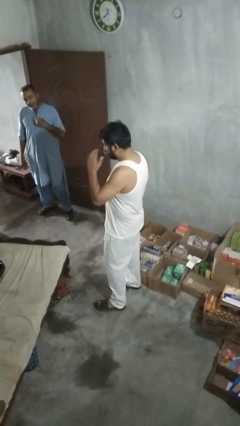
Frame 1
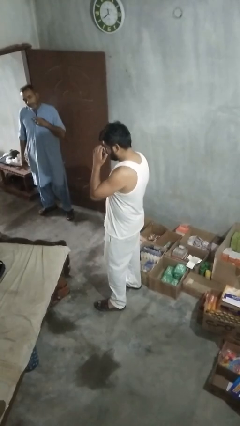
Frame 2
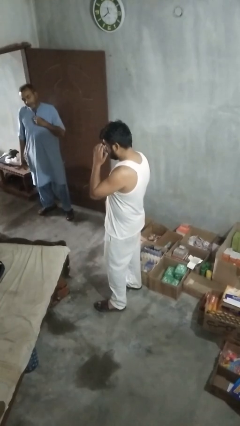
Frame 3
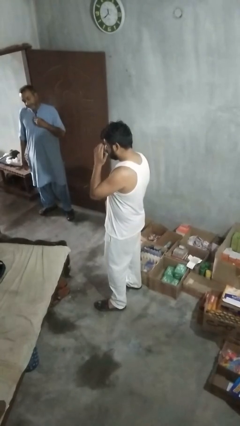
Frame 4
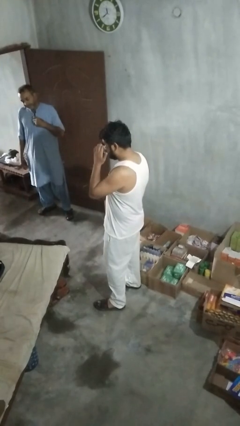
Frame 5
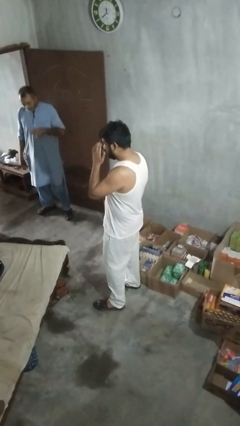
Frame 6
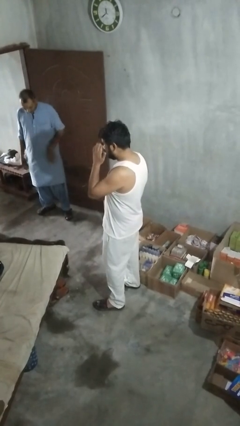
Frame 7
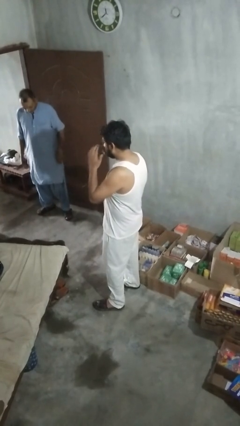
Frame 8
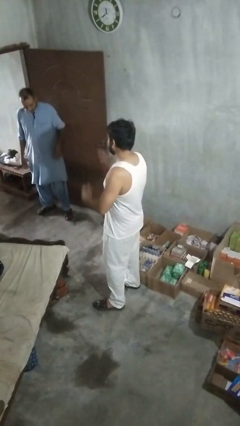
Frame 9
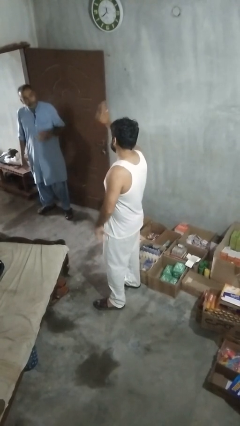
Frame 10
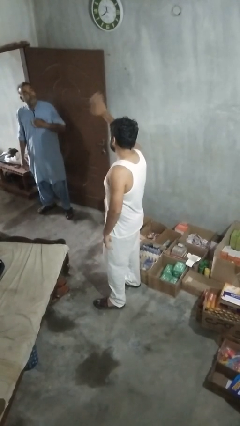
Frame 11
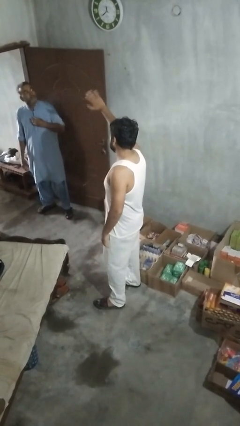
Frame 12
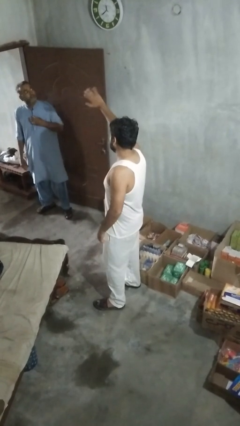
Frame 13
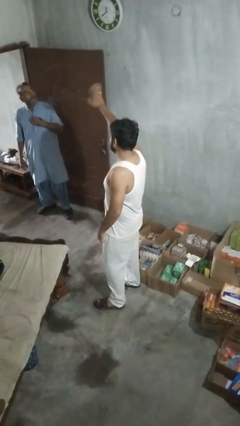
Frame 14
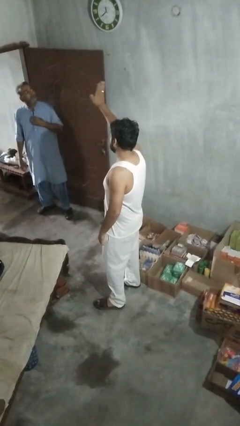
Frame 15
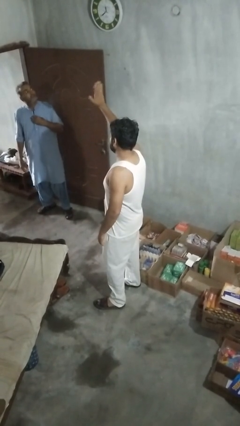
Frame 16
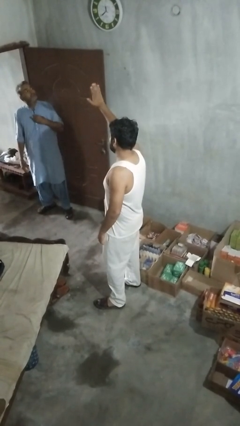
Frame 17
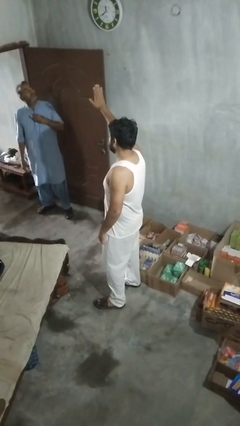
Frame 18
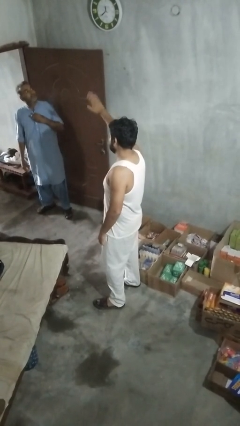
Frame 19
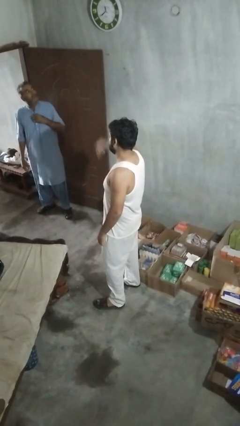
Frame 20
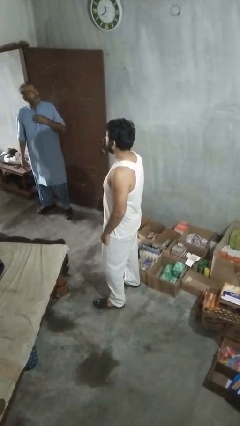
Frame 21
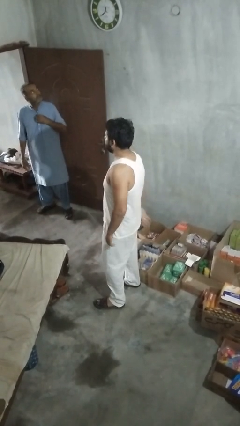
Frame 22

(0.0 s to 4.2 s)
person waves at person

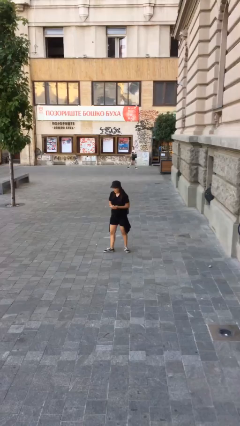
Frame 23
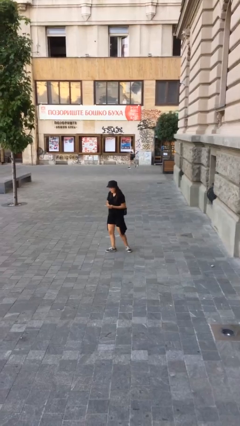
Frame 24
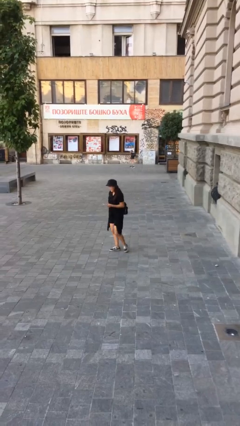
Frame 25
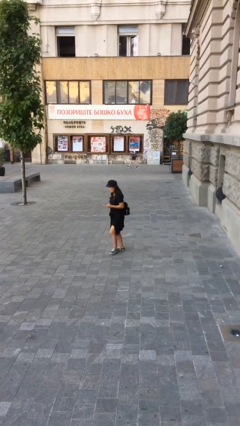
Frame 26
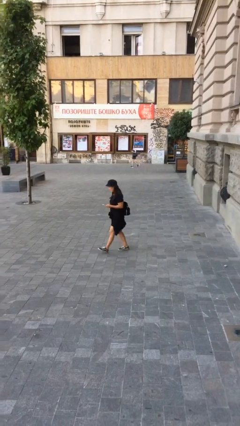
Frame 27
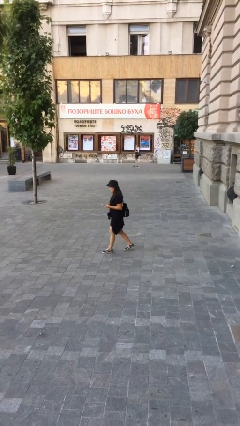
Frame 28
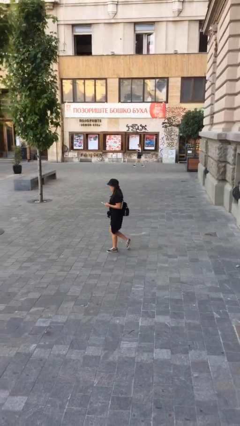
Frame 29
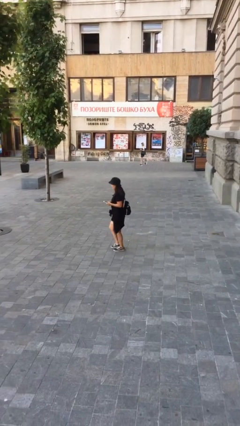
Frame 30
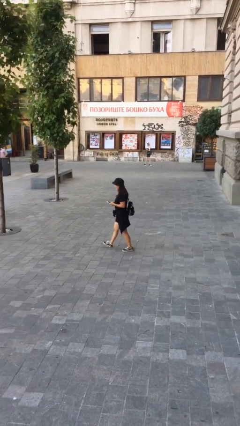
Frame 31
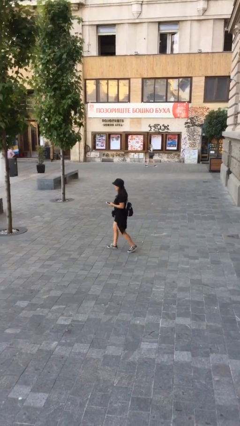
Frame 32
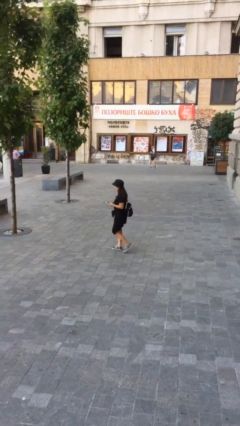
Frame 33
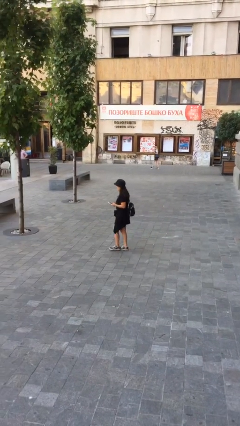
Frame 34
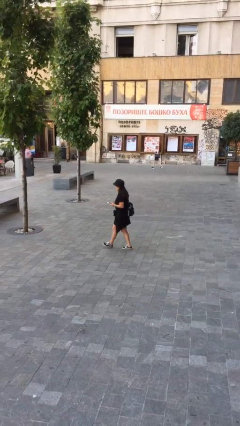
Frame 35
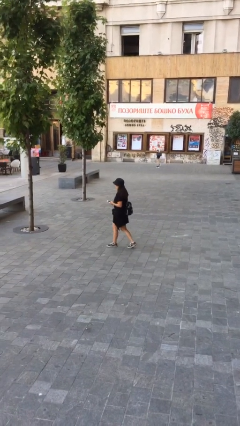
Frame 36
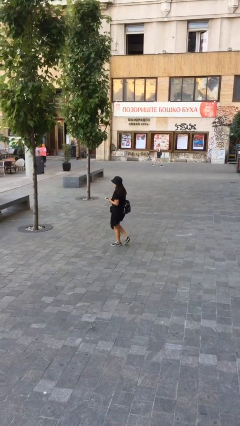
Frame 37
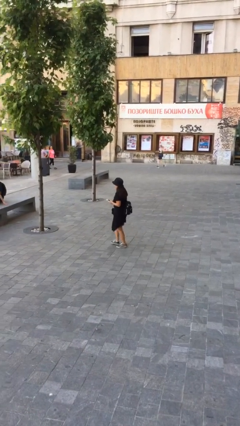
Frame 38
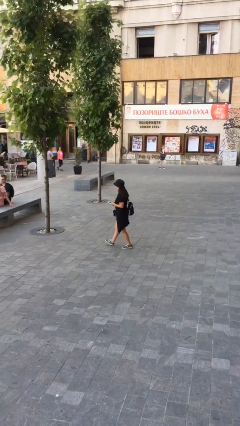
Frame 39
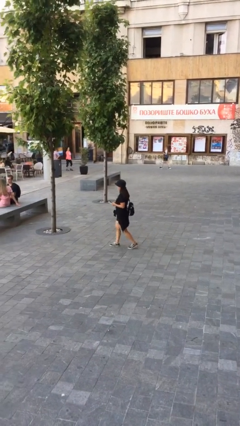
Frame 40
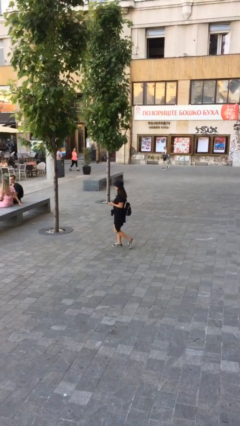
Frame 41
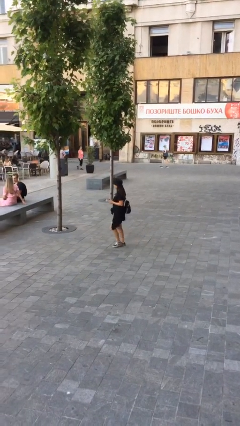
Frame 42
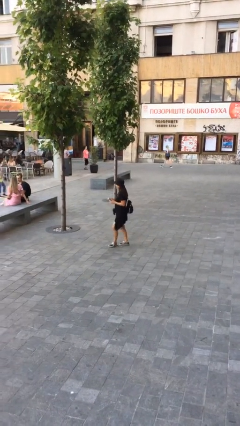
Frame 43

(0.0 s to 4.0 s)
person texts on phone

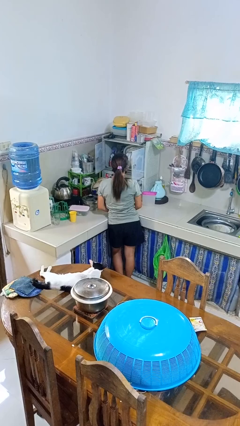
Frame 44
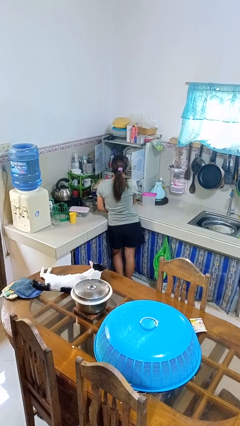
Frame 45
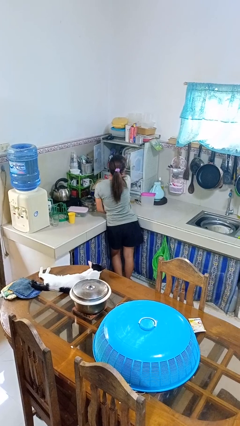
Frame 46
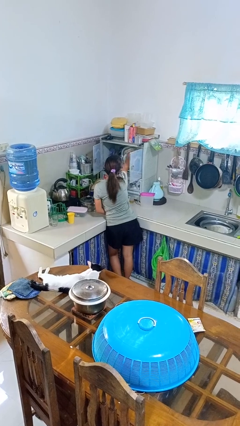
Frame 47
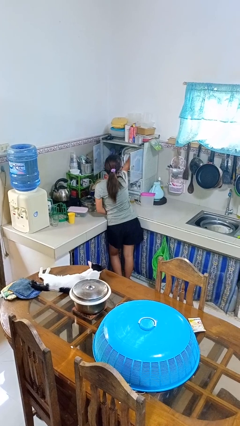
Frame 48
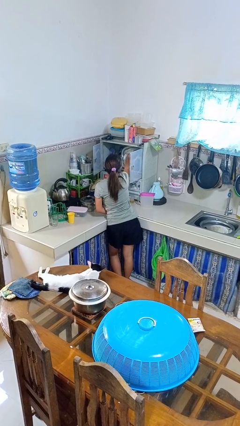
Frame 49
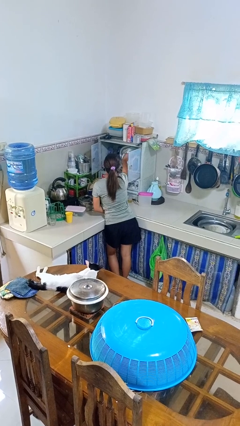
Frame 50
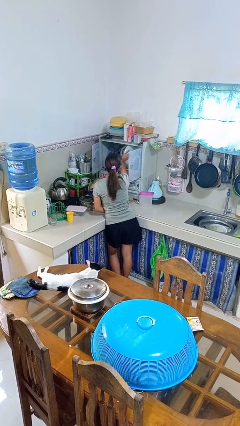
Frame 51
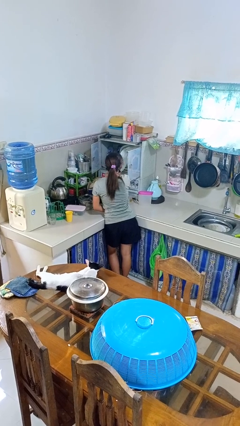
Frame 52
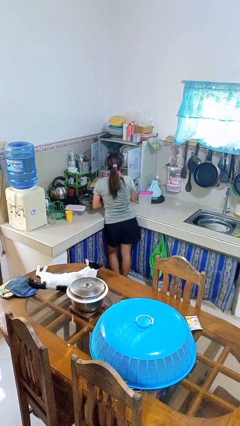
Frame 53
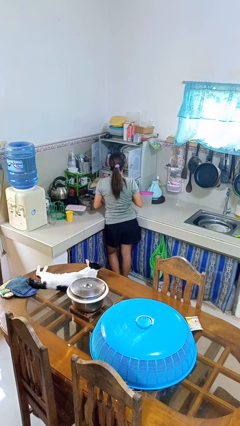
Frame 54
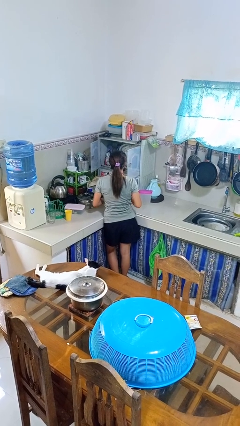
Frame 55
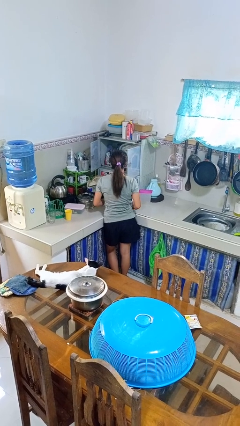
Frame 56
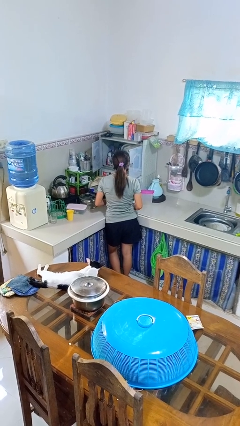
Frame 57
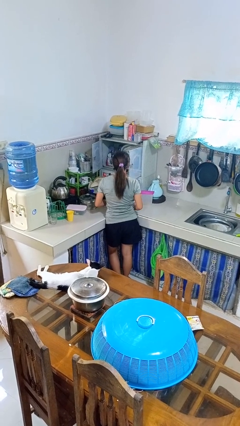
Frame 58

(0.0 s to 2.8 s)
person takes object from kitchen drawer

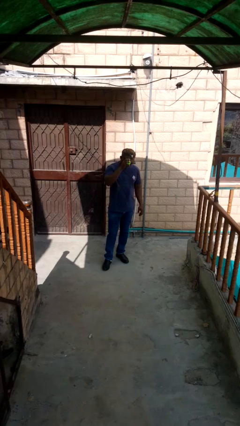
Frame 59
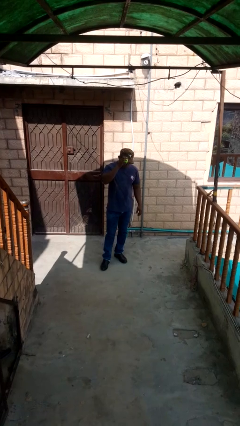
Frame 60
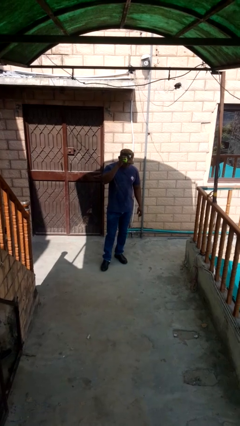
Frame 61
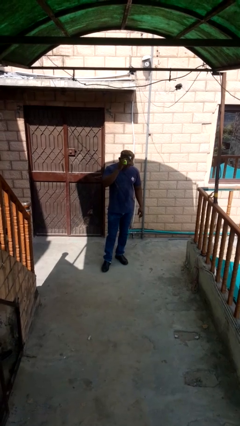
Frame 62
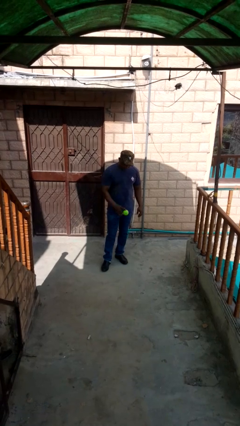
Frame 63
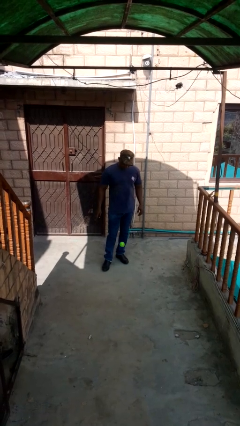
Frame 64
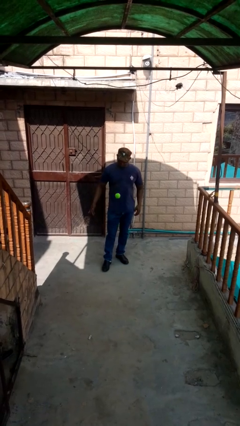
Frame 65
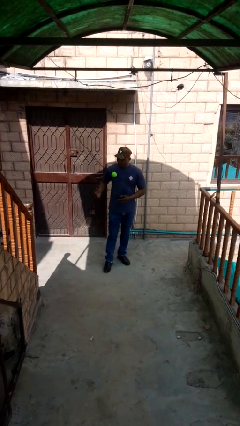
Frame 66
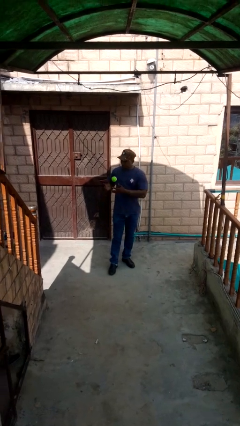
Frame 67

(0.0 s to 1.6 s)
person bounces ball on floor

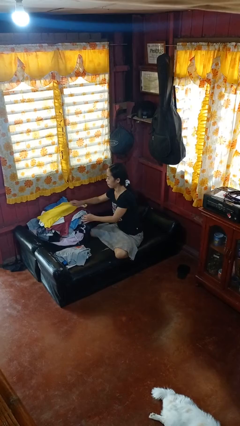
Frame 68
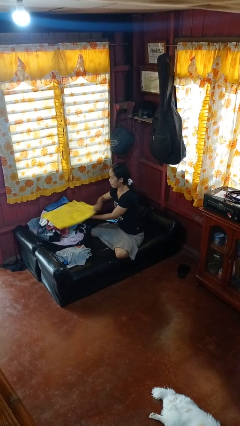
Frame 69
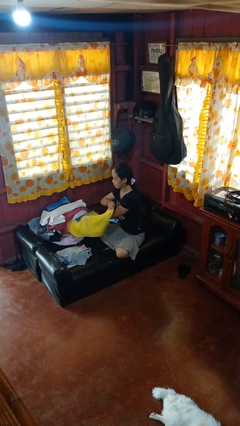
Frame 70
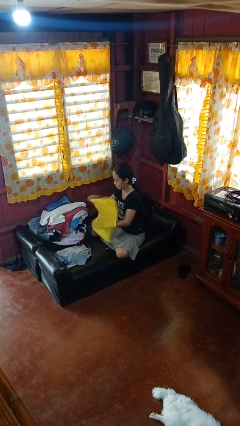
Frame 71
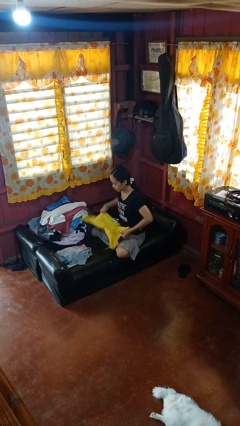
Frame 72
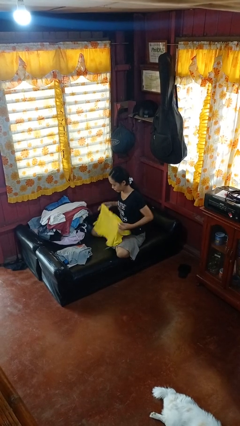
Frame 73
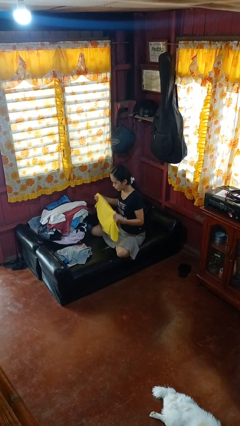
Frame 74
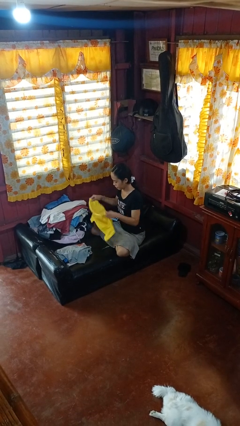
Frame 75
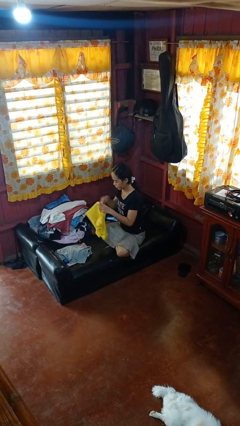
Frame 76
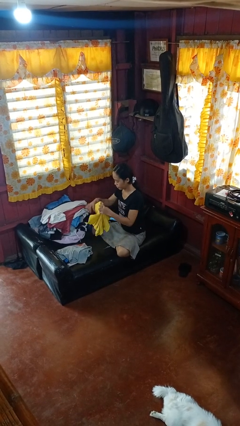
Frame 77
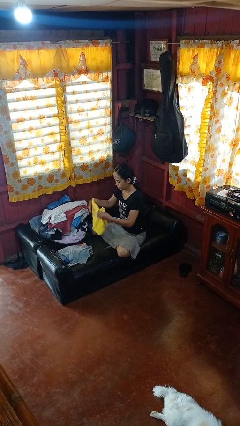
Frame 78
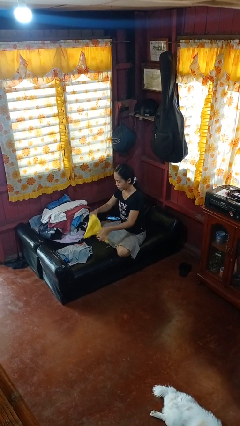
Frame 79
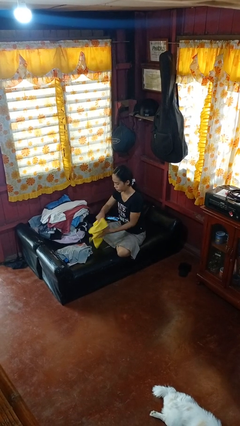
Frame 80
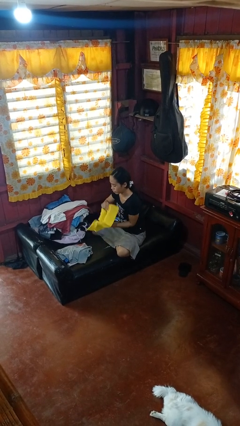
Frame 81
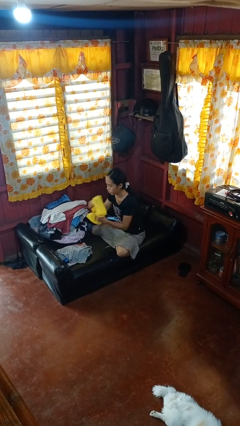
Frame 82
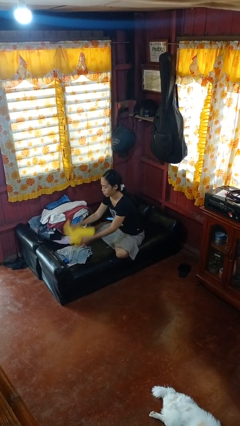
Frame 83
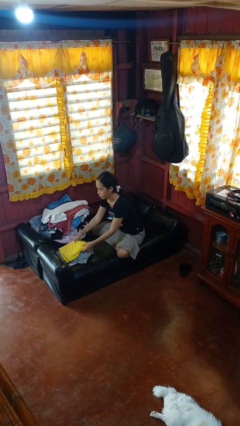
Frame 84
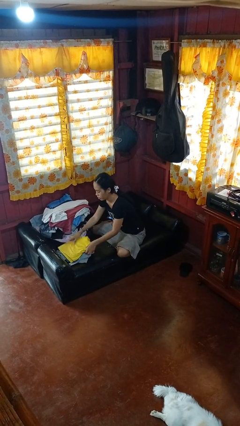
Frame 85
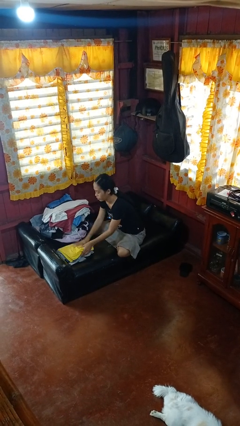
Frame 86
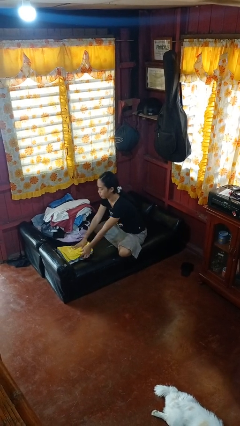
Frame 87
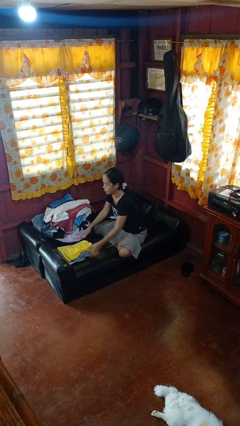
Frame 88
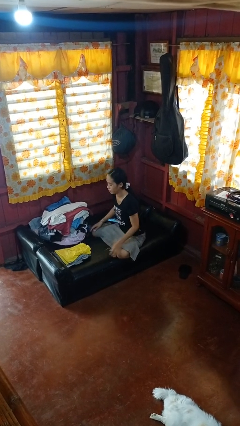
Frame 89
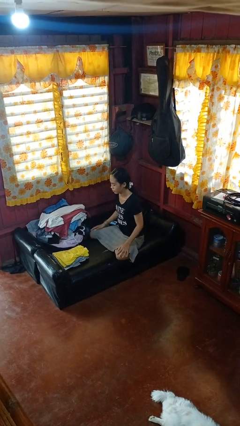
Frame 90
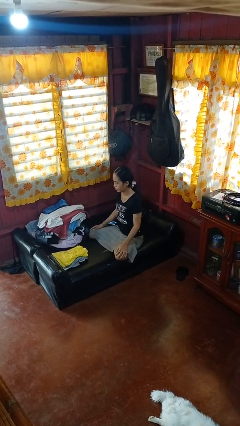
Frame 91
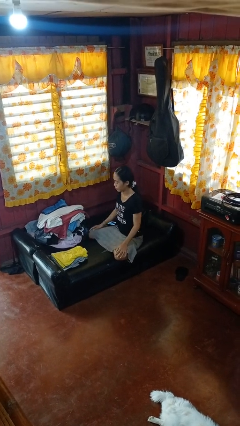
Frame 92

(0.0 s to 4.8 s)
person folds shirt

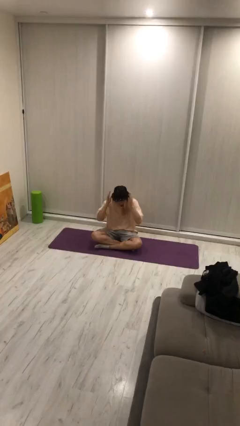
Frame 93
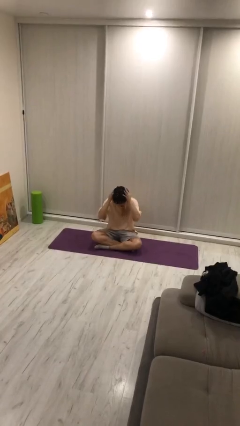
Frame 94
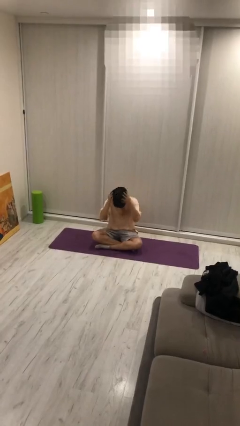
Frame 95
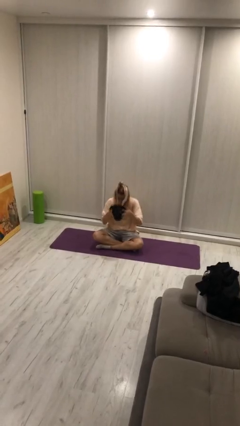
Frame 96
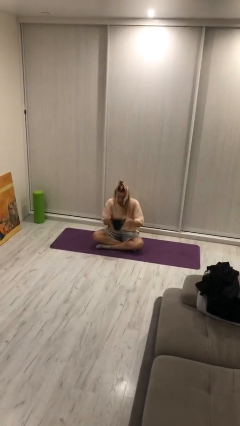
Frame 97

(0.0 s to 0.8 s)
person takes off hat
